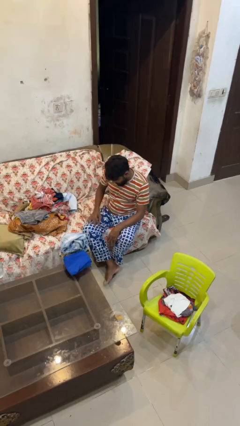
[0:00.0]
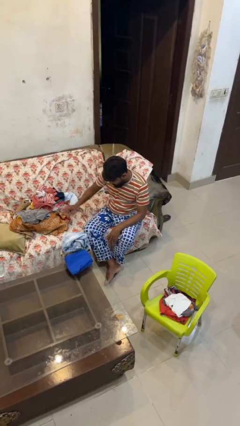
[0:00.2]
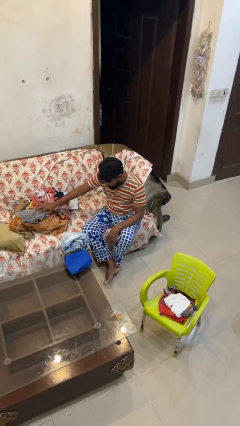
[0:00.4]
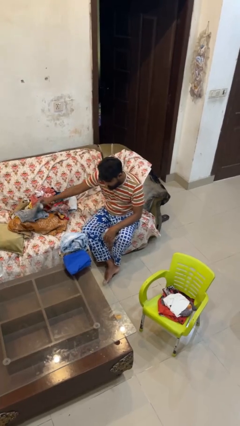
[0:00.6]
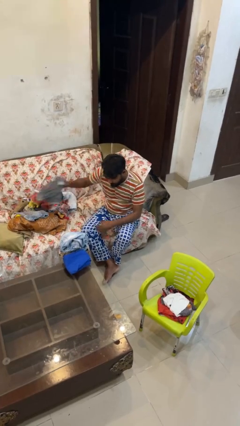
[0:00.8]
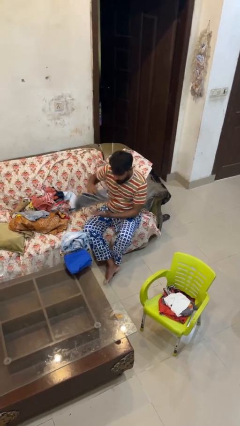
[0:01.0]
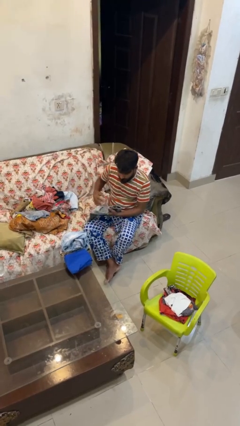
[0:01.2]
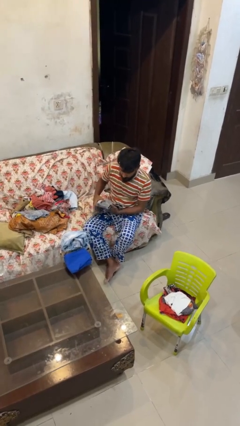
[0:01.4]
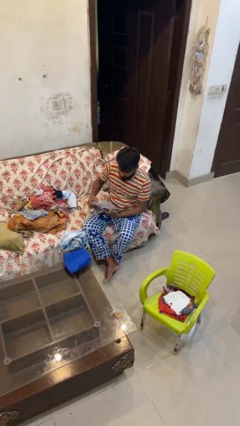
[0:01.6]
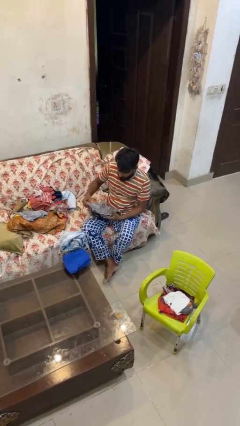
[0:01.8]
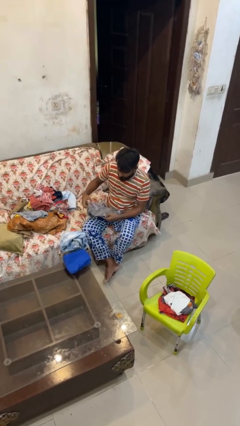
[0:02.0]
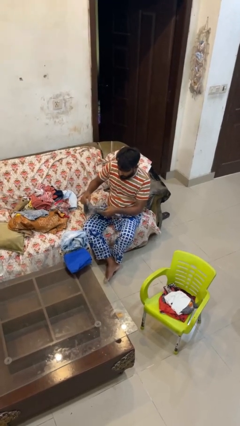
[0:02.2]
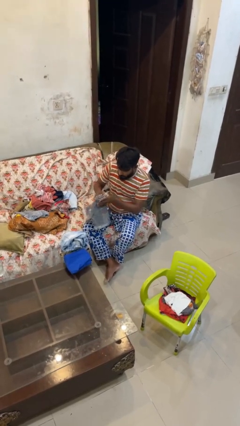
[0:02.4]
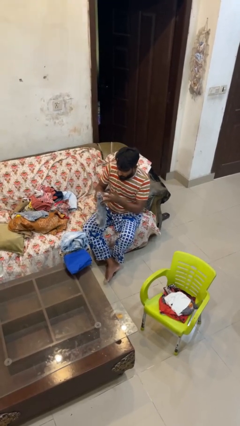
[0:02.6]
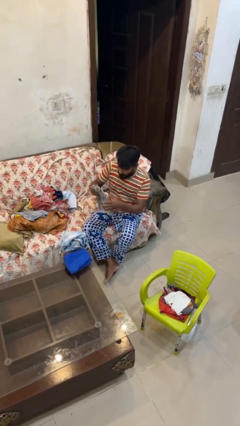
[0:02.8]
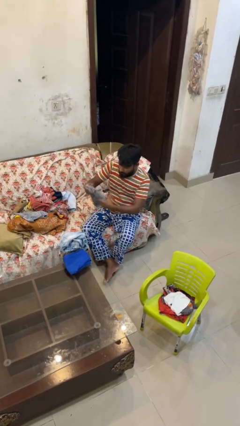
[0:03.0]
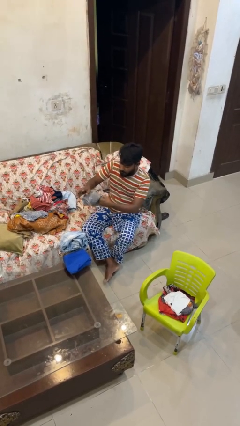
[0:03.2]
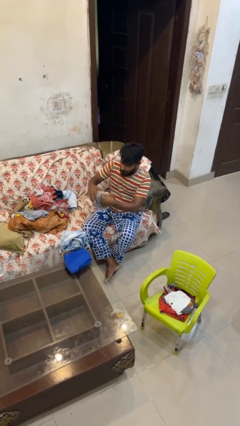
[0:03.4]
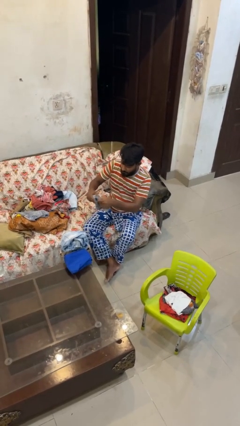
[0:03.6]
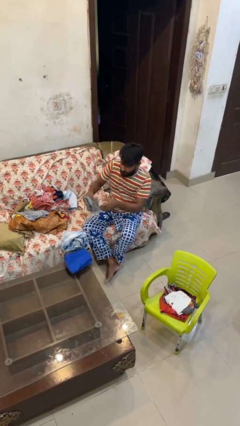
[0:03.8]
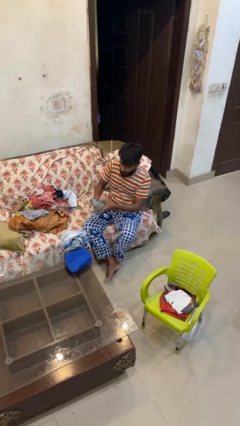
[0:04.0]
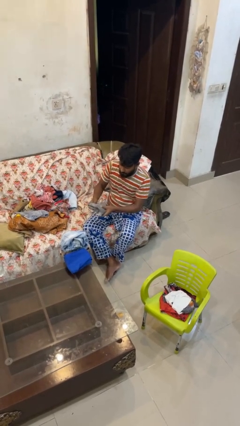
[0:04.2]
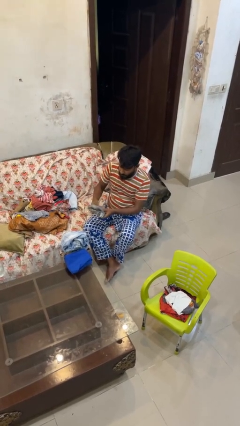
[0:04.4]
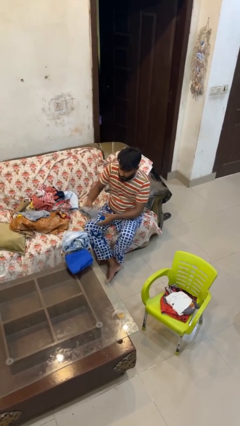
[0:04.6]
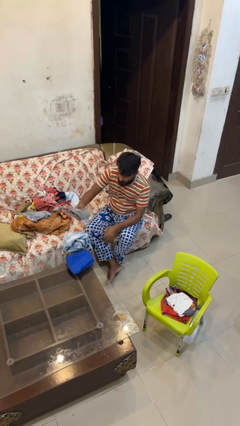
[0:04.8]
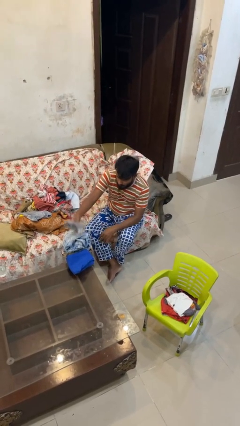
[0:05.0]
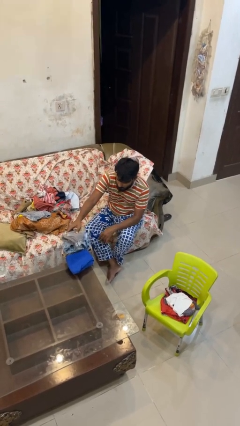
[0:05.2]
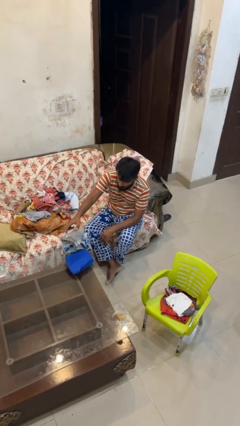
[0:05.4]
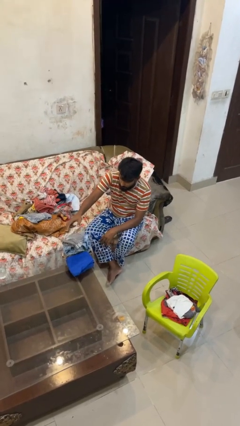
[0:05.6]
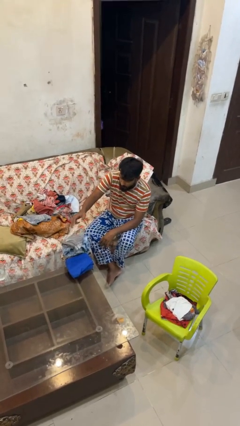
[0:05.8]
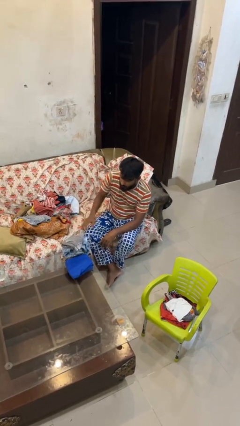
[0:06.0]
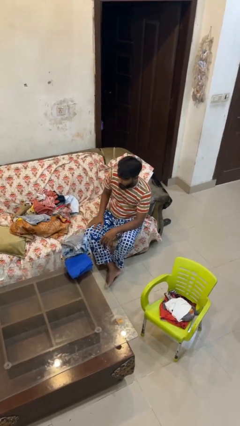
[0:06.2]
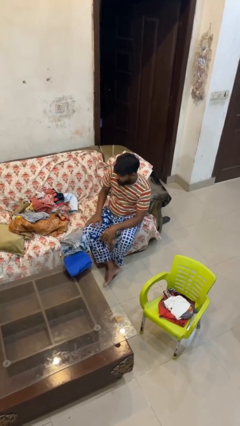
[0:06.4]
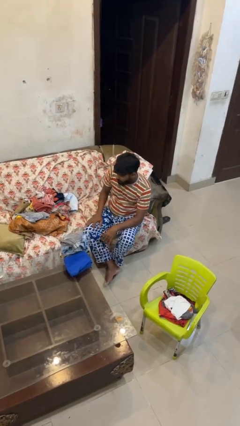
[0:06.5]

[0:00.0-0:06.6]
person folds pants

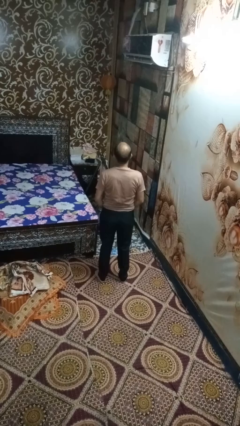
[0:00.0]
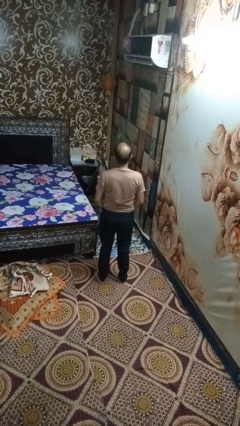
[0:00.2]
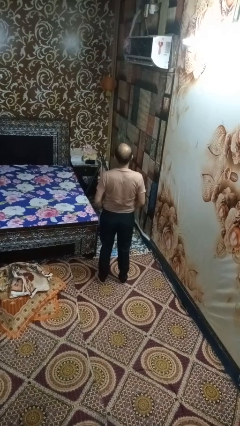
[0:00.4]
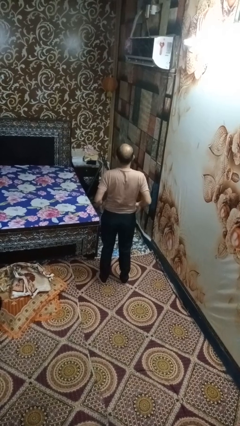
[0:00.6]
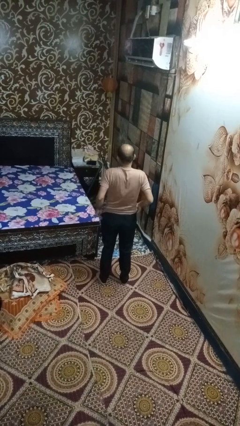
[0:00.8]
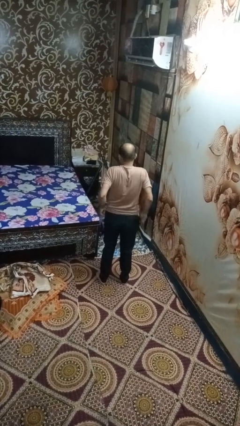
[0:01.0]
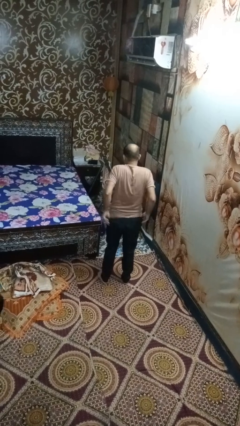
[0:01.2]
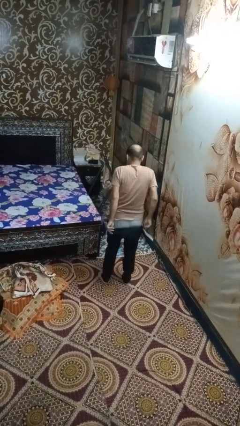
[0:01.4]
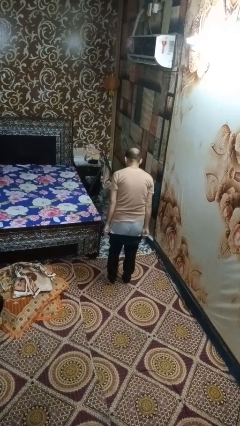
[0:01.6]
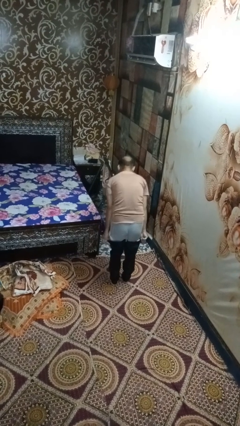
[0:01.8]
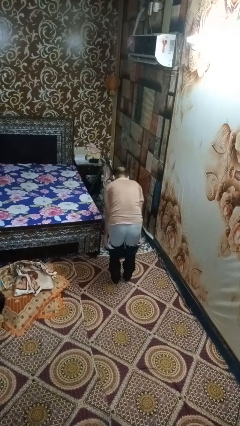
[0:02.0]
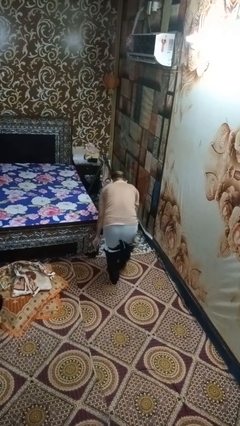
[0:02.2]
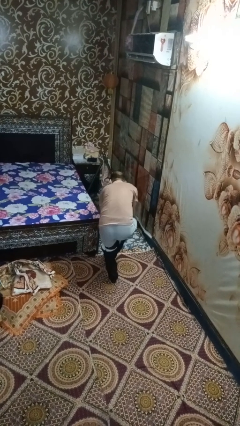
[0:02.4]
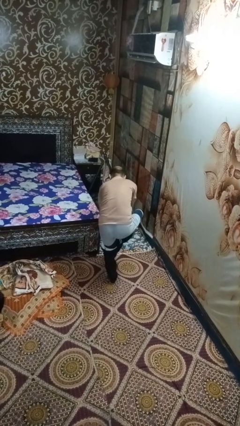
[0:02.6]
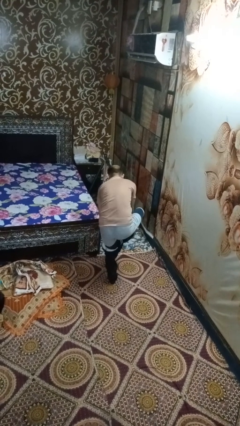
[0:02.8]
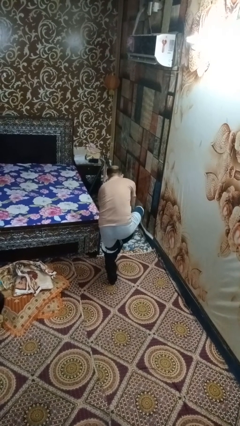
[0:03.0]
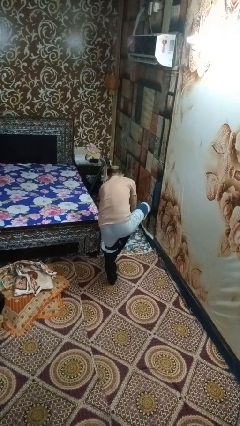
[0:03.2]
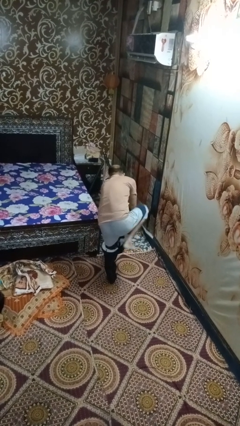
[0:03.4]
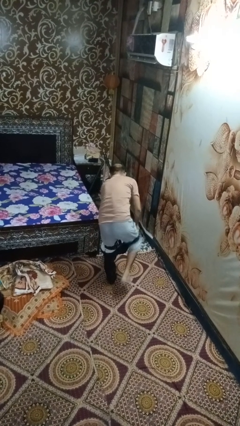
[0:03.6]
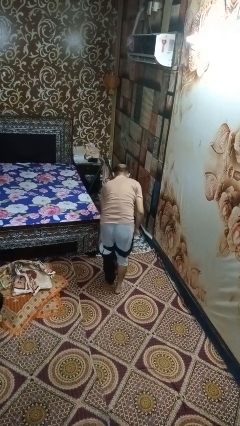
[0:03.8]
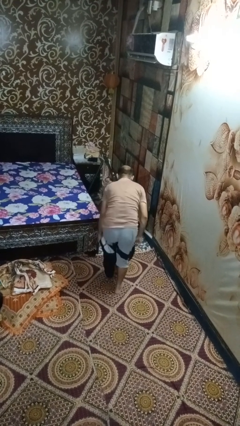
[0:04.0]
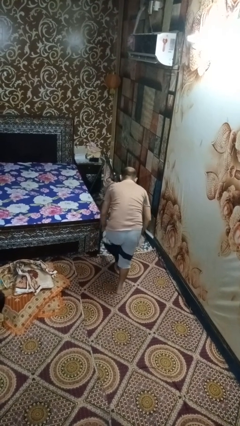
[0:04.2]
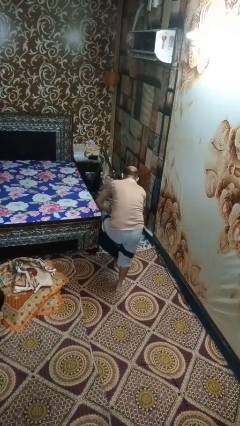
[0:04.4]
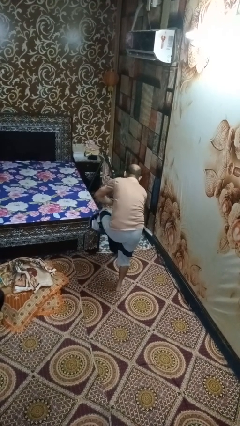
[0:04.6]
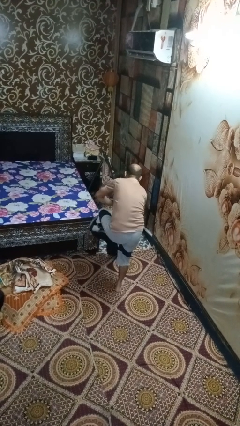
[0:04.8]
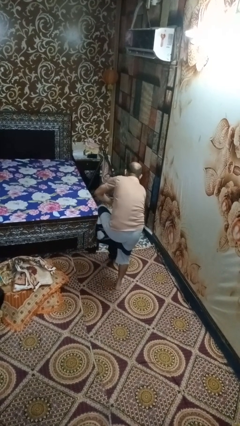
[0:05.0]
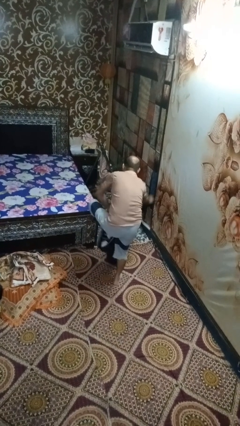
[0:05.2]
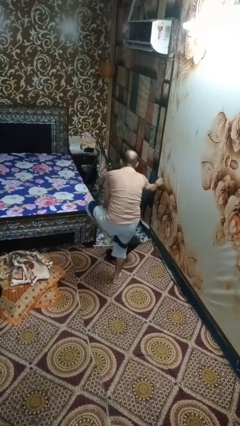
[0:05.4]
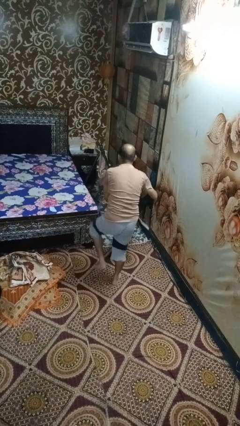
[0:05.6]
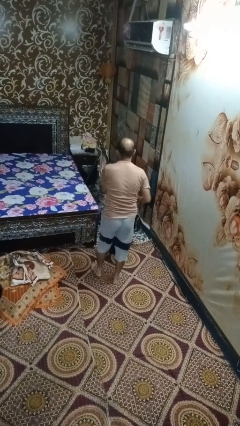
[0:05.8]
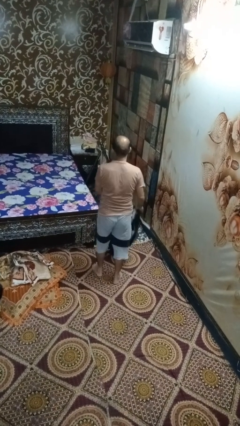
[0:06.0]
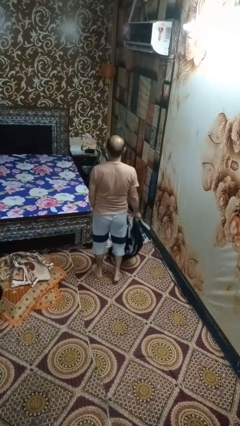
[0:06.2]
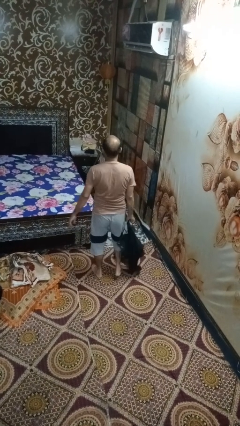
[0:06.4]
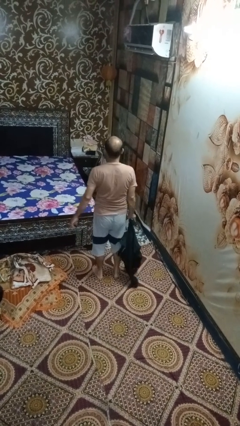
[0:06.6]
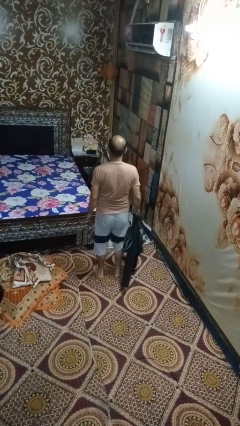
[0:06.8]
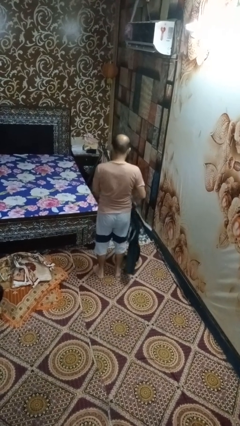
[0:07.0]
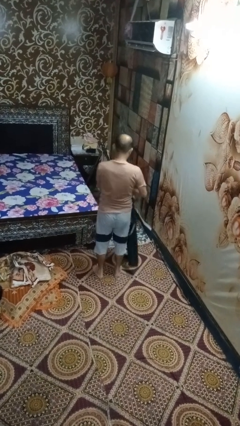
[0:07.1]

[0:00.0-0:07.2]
person takes off pants

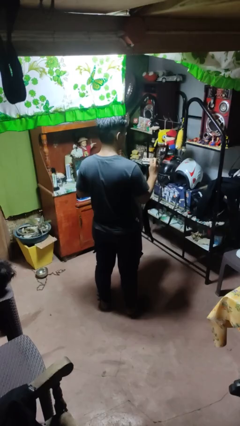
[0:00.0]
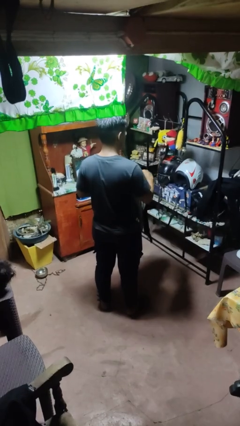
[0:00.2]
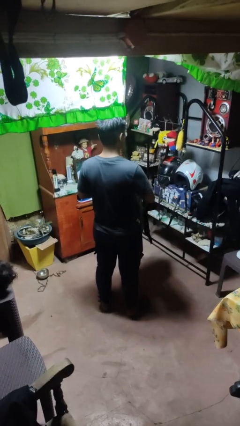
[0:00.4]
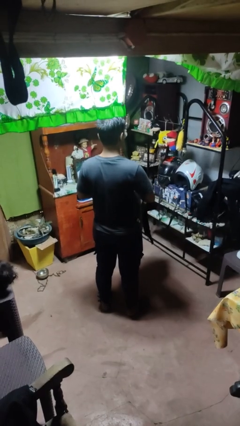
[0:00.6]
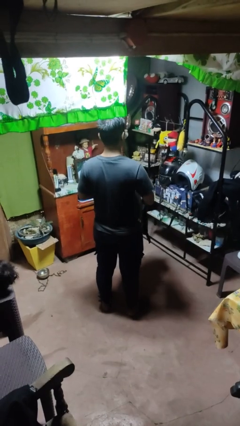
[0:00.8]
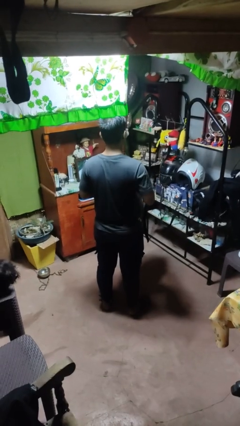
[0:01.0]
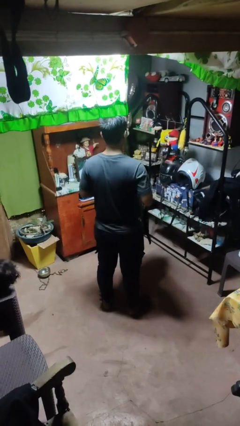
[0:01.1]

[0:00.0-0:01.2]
person puts object into bag

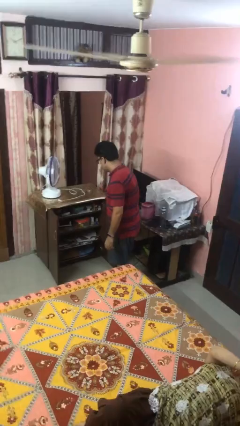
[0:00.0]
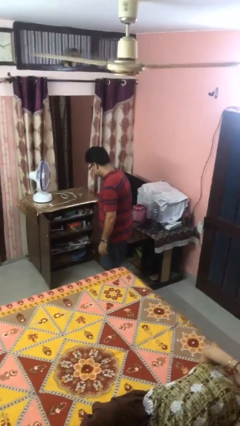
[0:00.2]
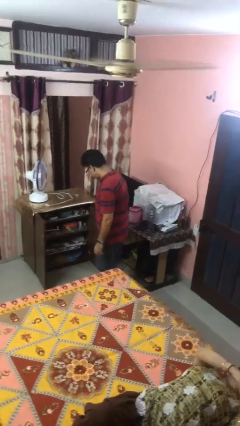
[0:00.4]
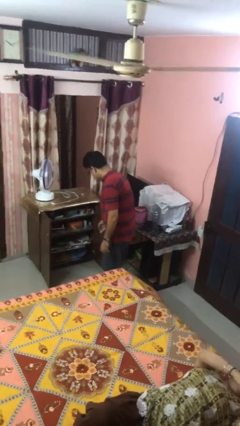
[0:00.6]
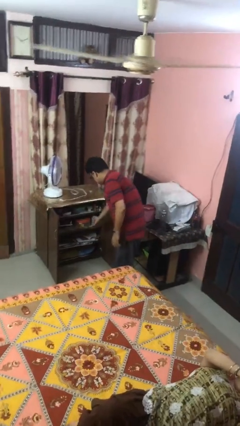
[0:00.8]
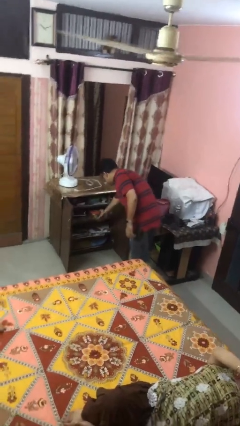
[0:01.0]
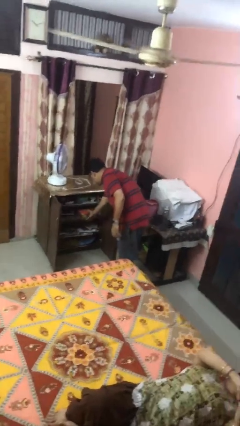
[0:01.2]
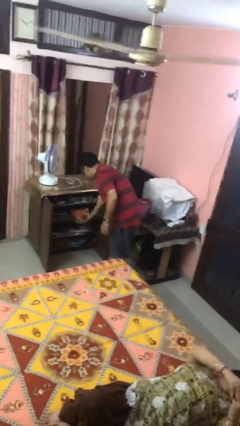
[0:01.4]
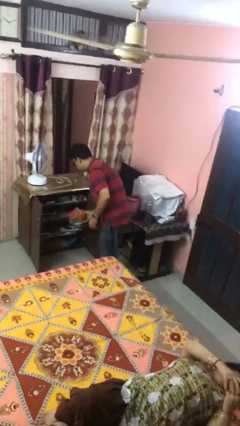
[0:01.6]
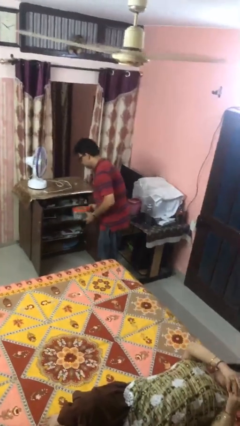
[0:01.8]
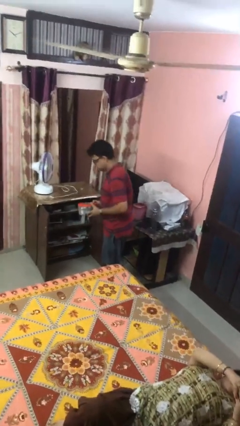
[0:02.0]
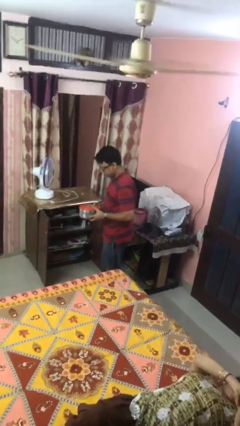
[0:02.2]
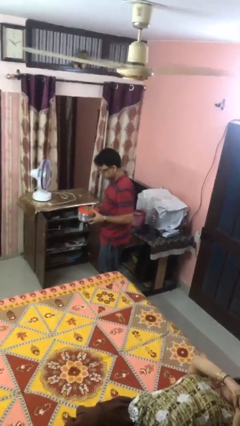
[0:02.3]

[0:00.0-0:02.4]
person picks up object from cabinet

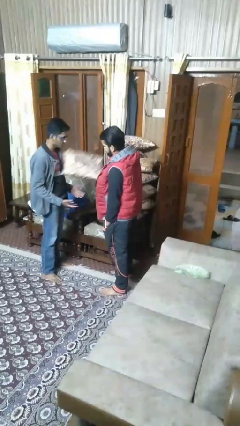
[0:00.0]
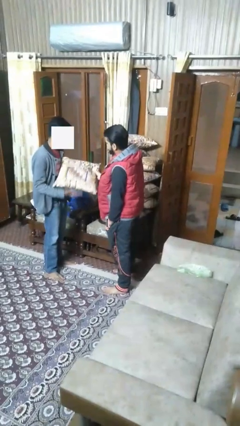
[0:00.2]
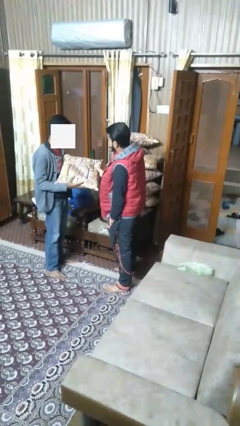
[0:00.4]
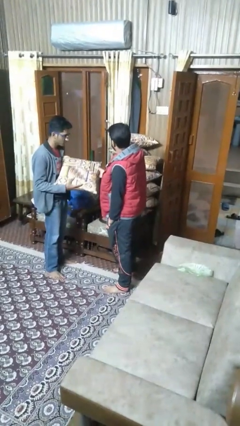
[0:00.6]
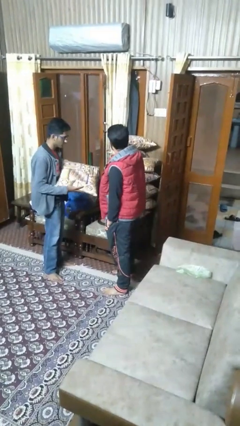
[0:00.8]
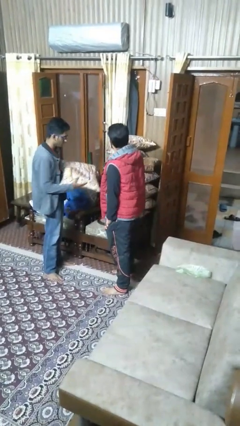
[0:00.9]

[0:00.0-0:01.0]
person transfers object to person
